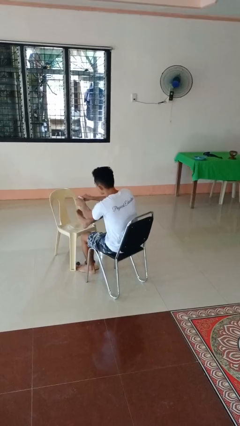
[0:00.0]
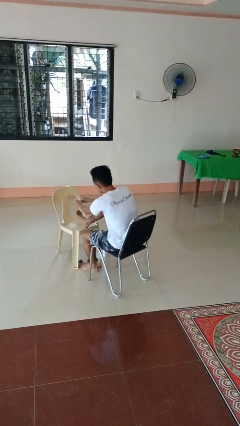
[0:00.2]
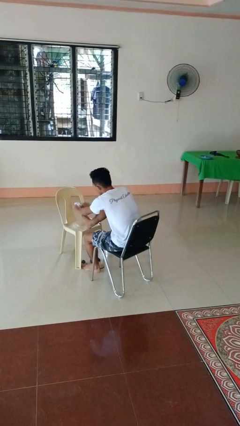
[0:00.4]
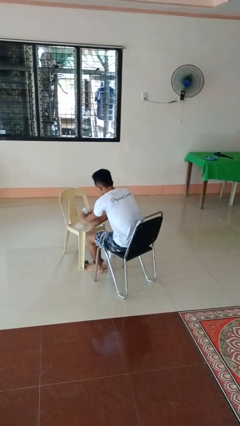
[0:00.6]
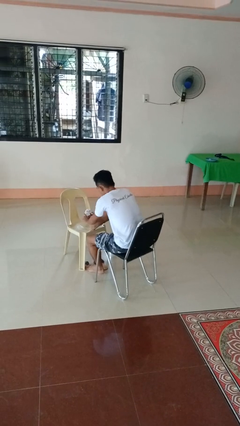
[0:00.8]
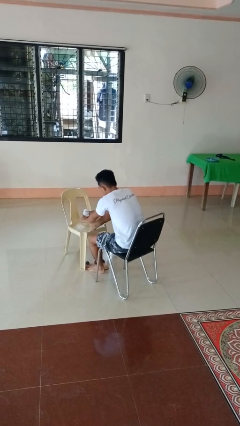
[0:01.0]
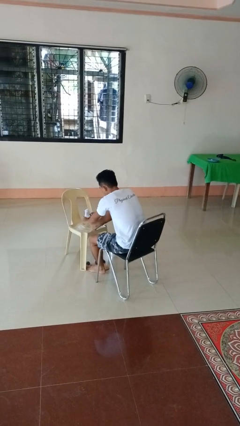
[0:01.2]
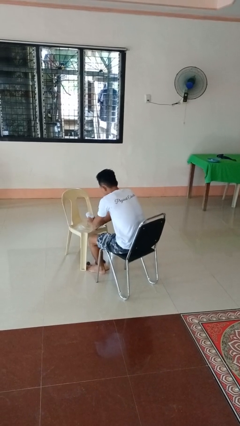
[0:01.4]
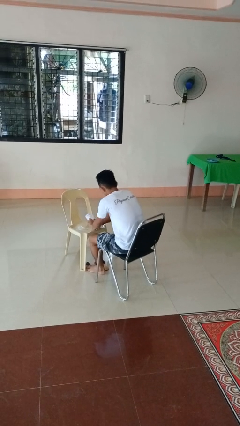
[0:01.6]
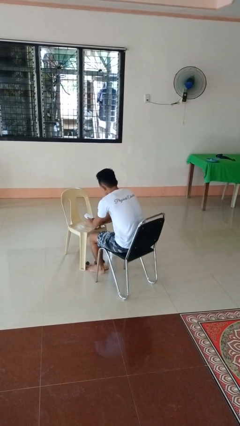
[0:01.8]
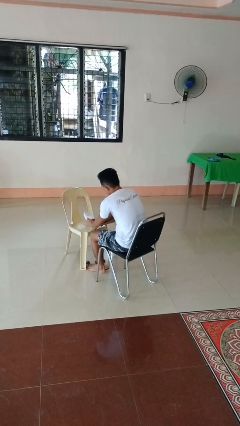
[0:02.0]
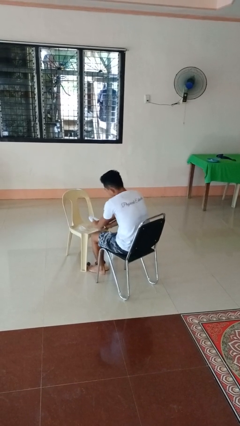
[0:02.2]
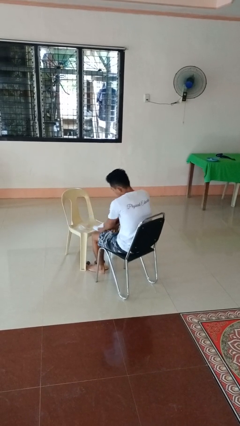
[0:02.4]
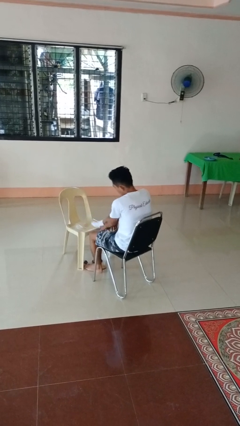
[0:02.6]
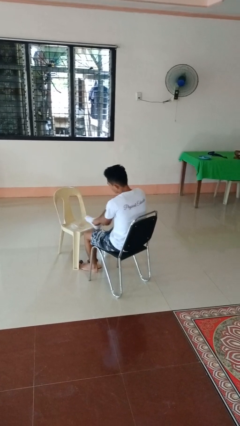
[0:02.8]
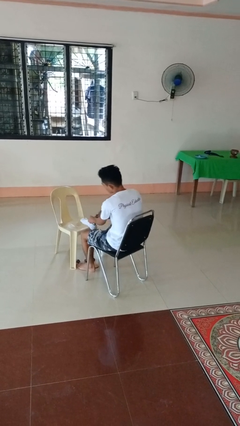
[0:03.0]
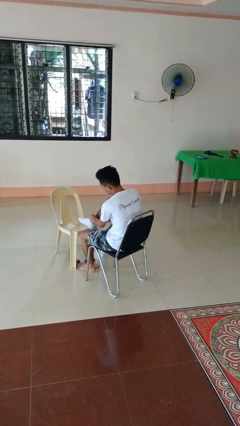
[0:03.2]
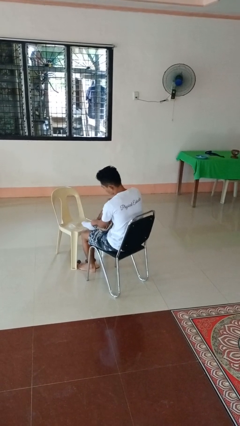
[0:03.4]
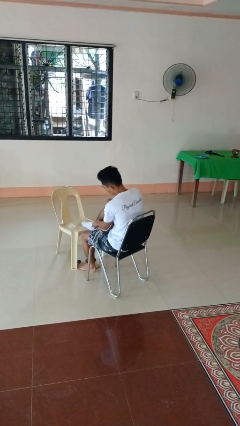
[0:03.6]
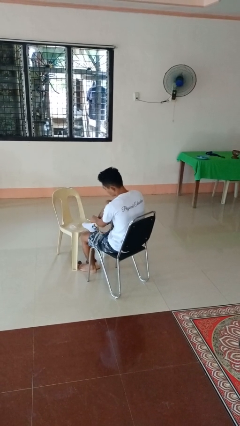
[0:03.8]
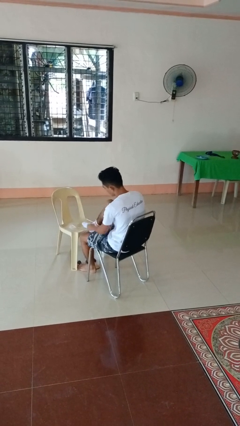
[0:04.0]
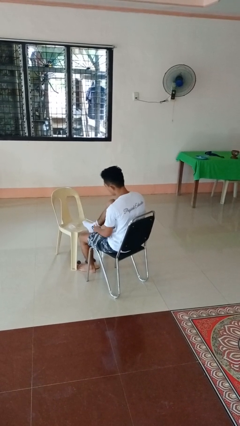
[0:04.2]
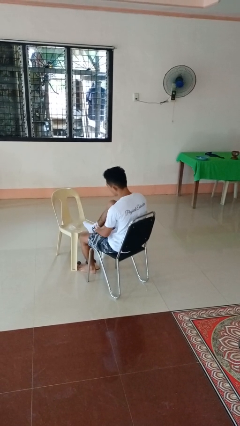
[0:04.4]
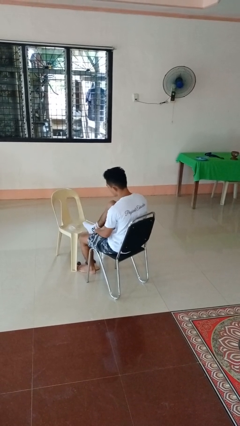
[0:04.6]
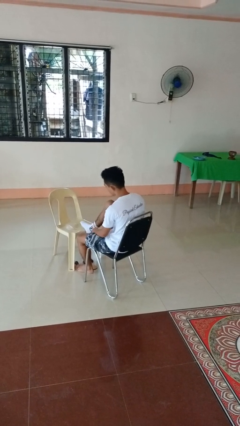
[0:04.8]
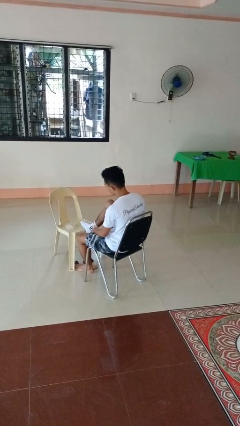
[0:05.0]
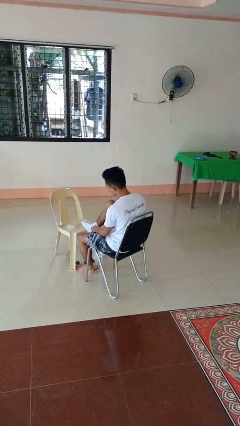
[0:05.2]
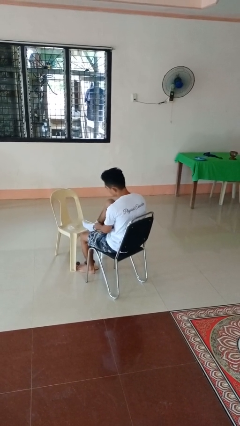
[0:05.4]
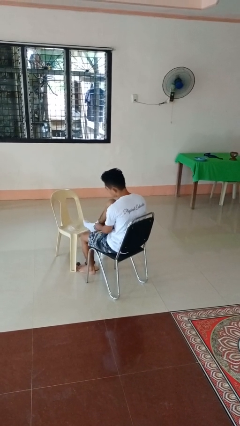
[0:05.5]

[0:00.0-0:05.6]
person puts on socks

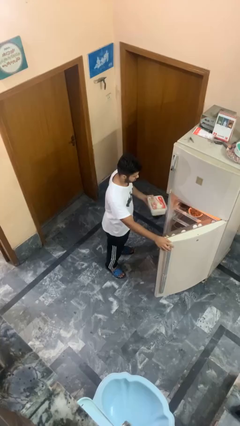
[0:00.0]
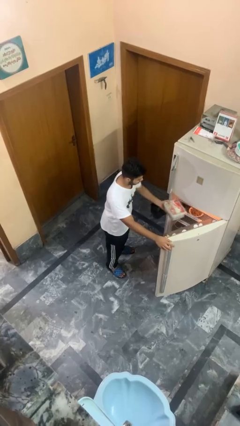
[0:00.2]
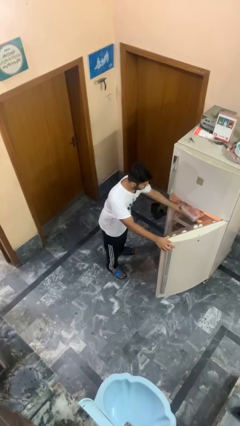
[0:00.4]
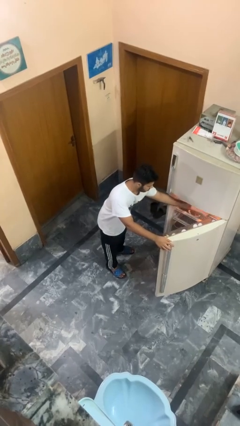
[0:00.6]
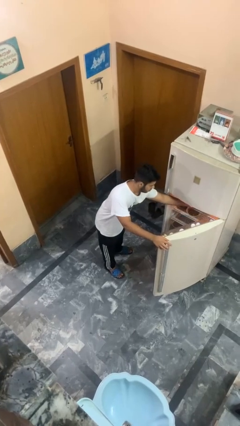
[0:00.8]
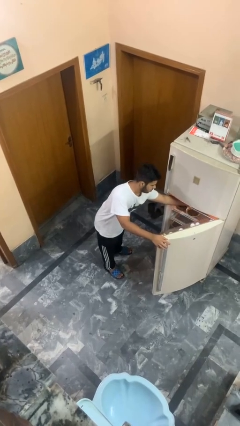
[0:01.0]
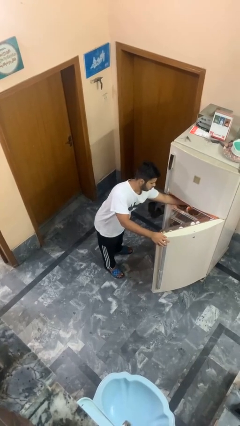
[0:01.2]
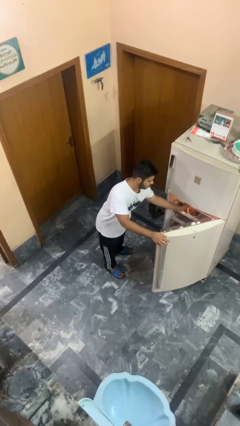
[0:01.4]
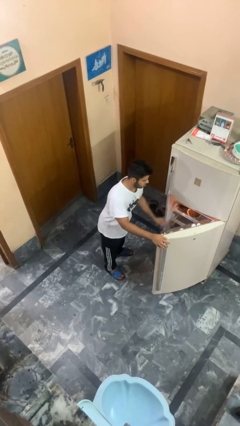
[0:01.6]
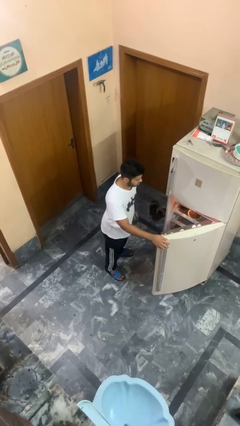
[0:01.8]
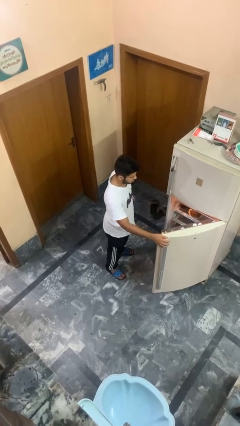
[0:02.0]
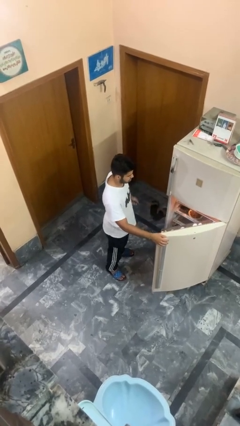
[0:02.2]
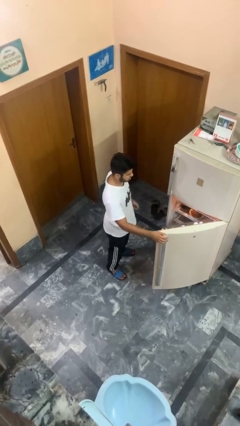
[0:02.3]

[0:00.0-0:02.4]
person puts object into refrigerator

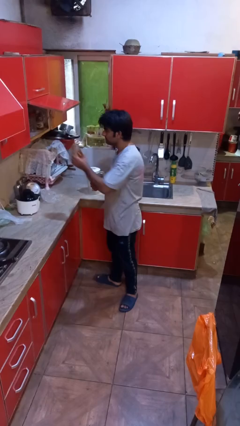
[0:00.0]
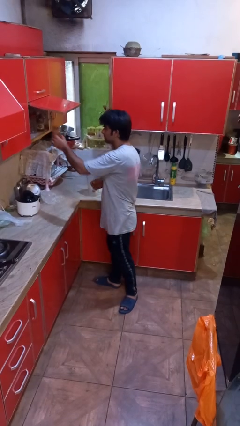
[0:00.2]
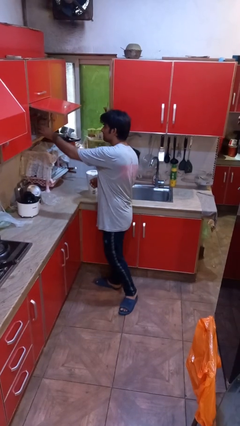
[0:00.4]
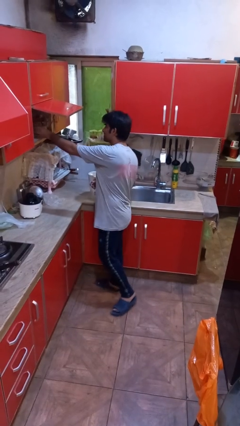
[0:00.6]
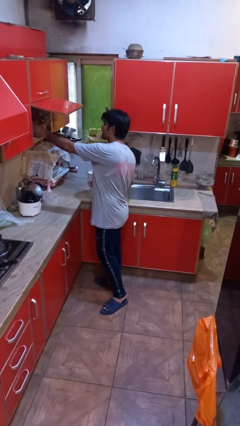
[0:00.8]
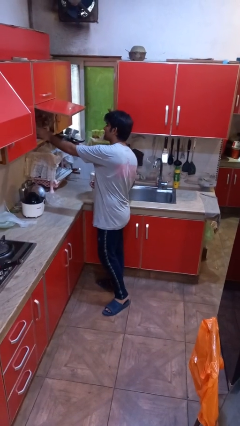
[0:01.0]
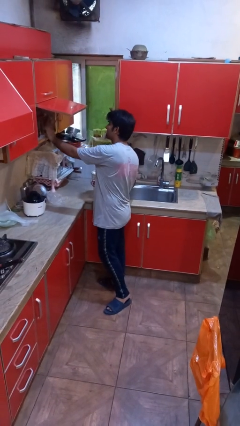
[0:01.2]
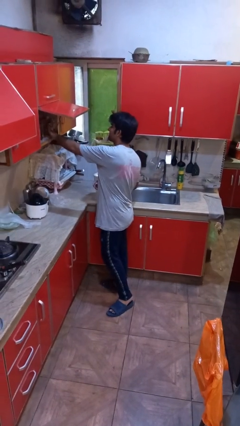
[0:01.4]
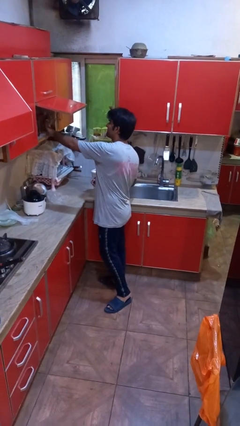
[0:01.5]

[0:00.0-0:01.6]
person puts down object into cabinet

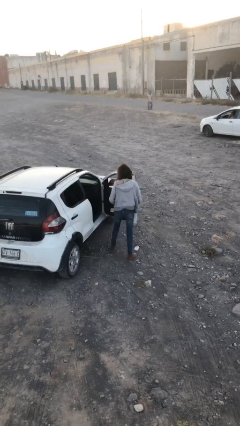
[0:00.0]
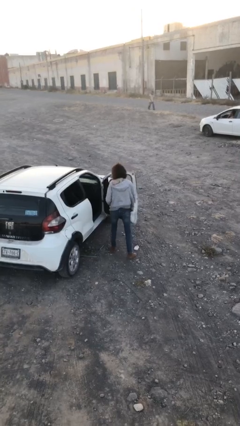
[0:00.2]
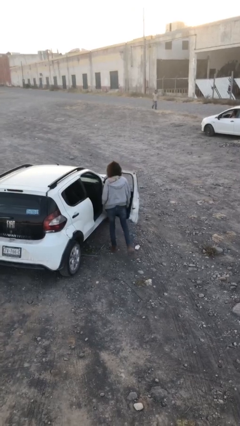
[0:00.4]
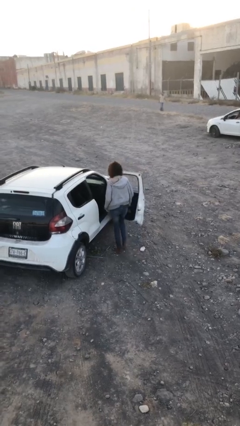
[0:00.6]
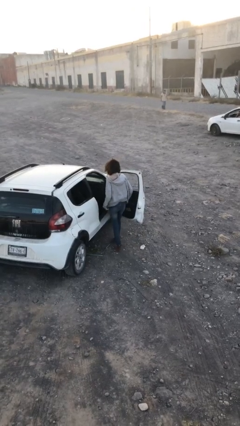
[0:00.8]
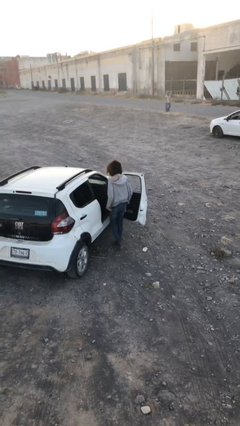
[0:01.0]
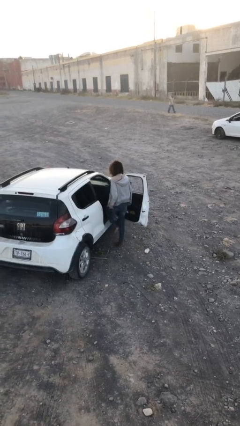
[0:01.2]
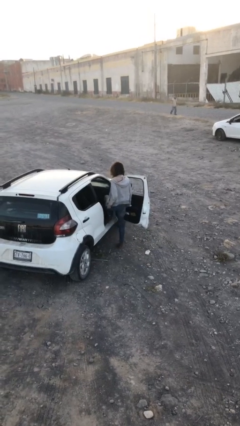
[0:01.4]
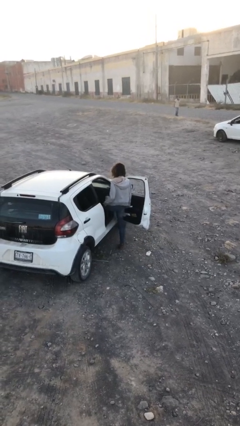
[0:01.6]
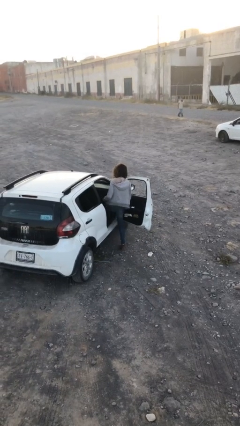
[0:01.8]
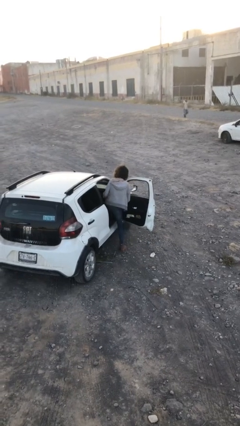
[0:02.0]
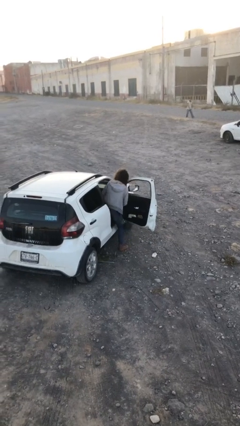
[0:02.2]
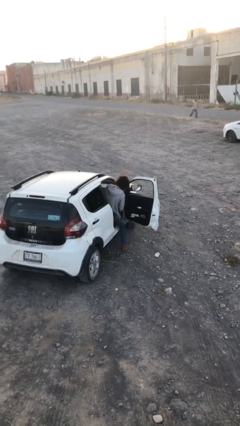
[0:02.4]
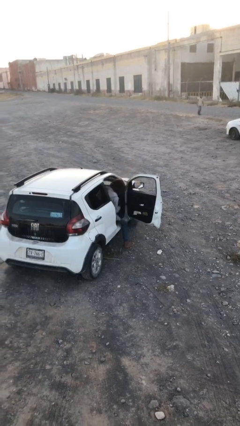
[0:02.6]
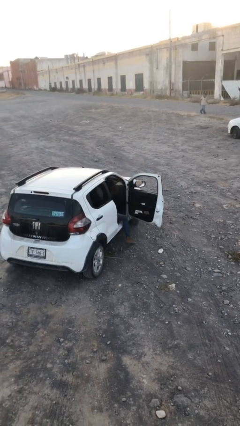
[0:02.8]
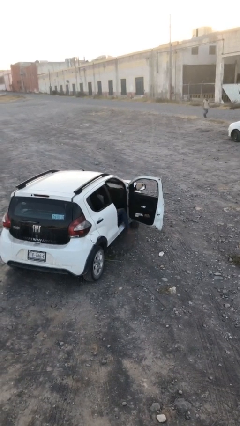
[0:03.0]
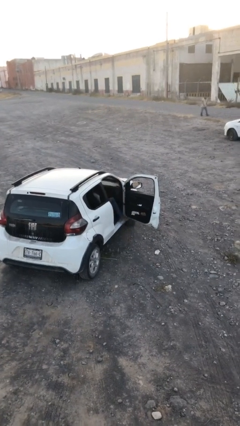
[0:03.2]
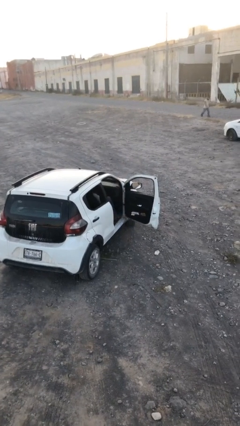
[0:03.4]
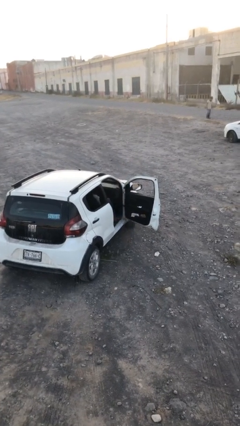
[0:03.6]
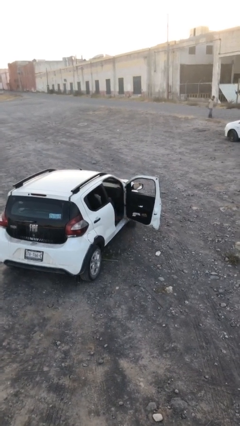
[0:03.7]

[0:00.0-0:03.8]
person enters car

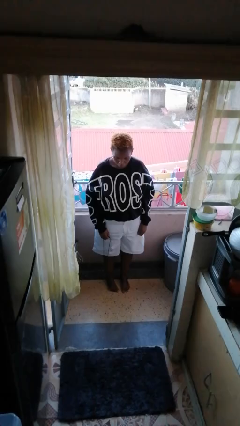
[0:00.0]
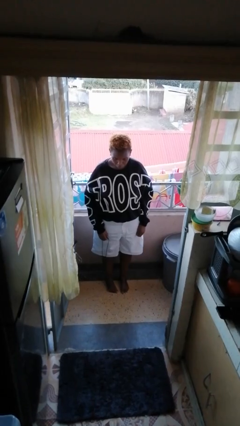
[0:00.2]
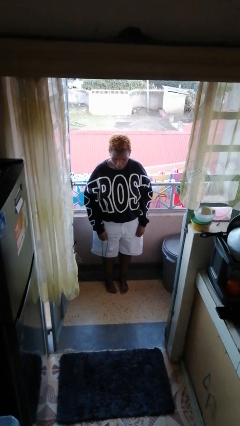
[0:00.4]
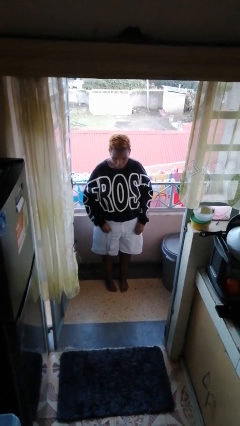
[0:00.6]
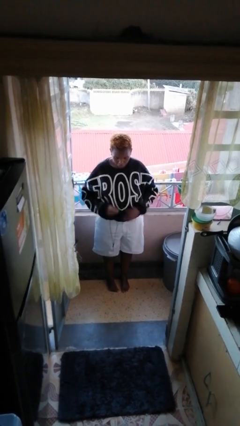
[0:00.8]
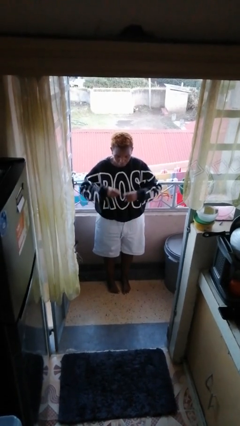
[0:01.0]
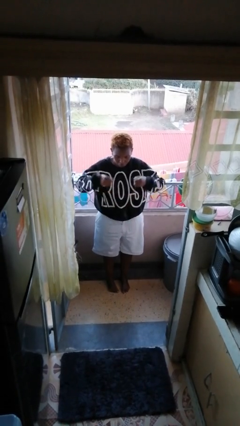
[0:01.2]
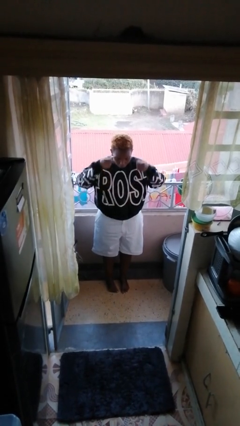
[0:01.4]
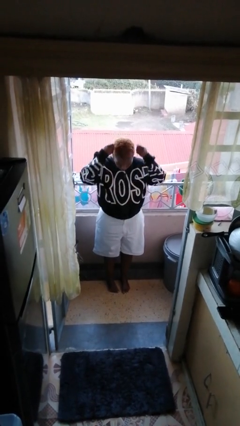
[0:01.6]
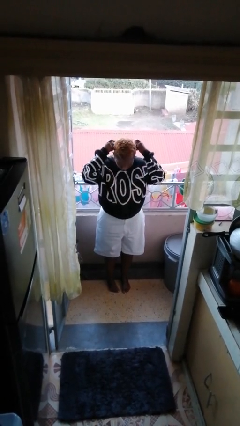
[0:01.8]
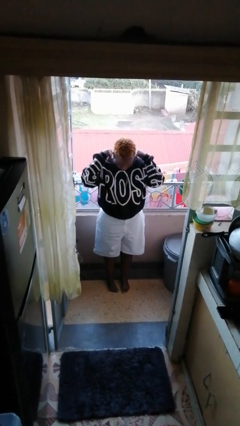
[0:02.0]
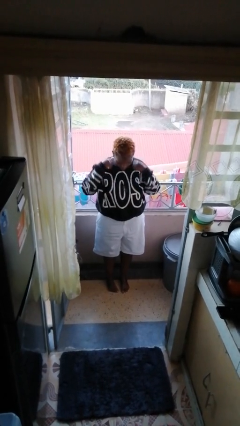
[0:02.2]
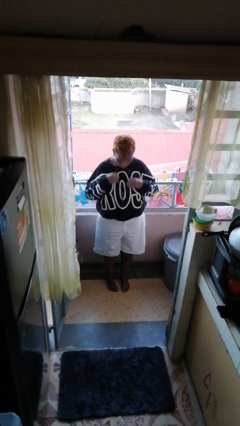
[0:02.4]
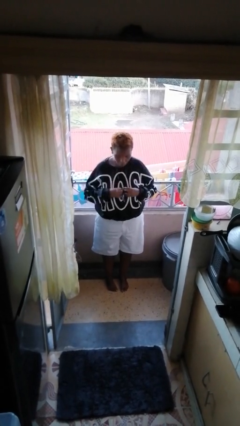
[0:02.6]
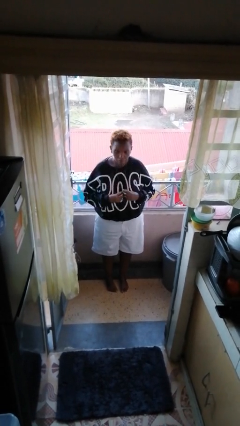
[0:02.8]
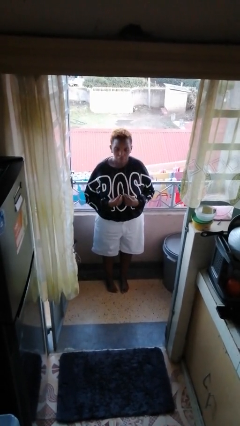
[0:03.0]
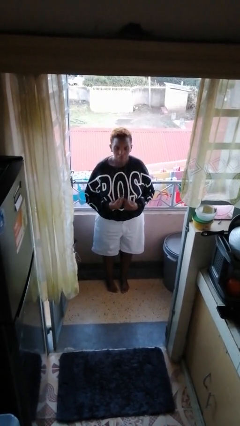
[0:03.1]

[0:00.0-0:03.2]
person puts on necklace

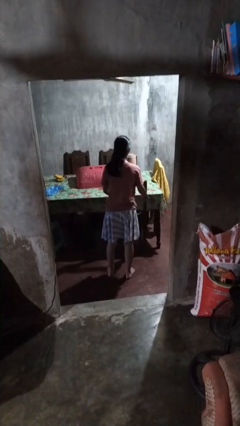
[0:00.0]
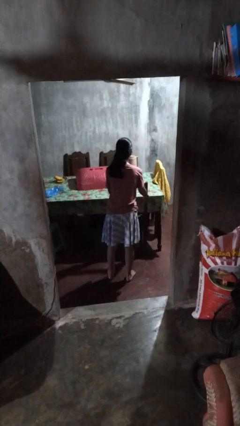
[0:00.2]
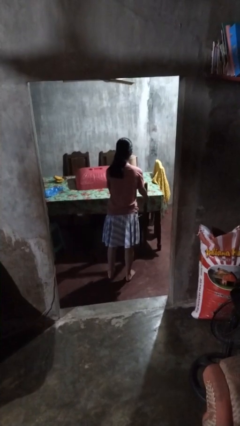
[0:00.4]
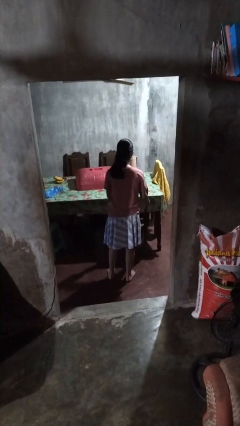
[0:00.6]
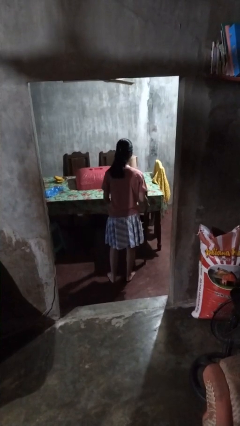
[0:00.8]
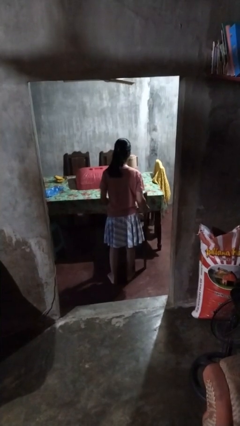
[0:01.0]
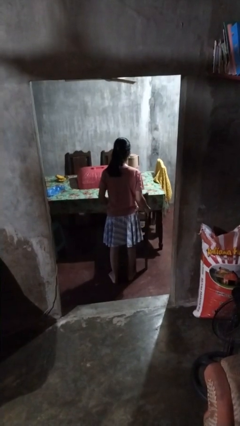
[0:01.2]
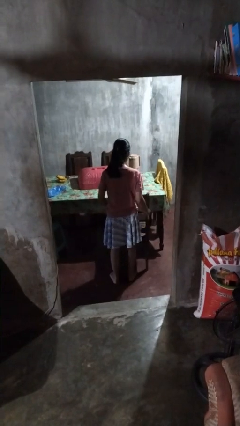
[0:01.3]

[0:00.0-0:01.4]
person pulls out chair
